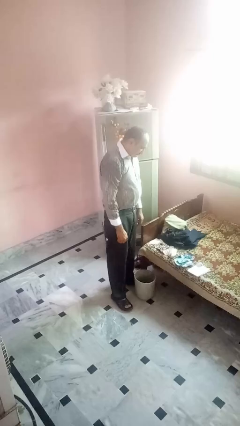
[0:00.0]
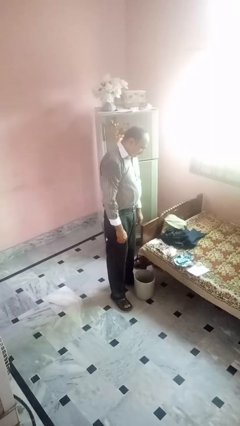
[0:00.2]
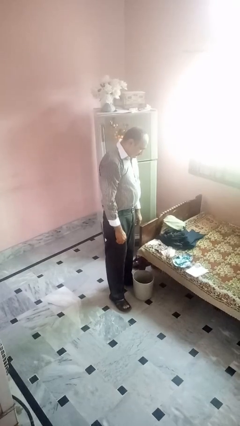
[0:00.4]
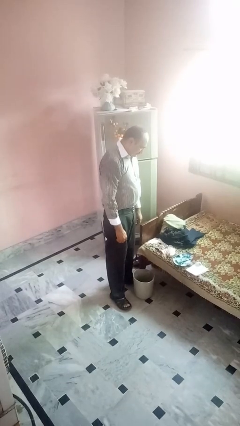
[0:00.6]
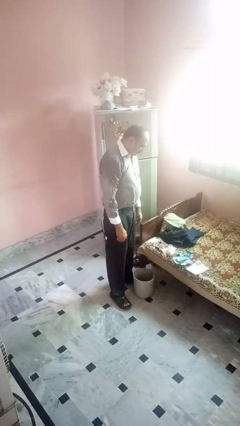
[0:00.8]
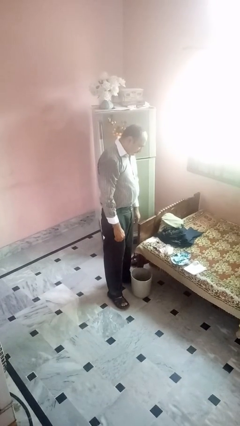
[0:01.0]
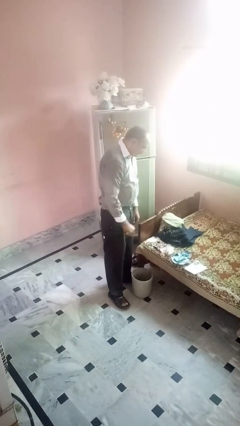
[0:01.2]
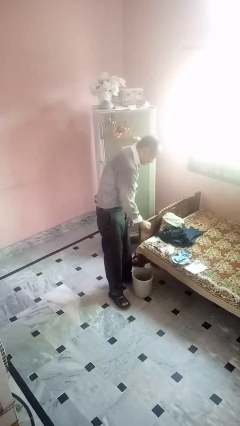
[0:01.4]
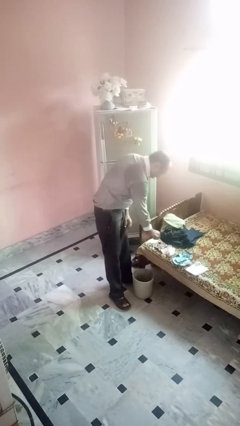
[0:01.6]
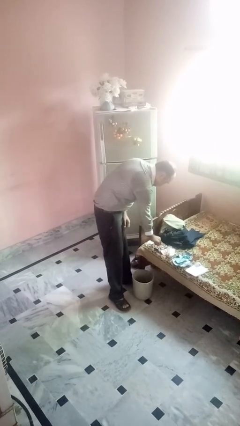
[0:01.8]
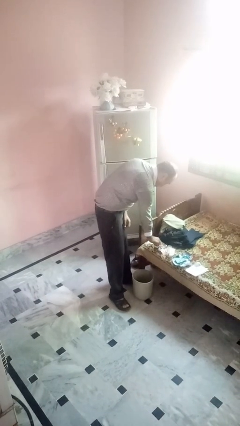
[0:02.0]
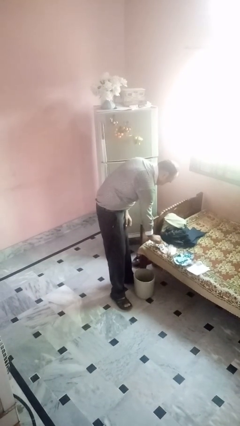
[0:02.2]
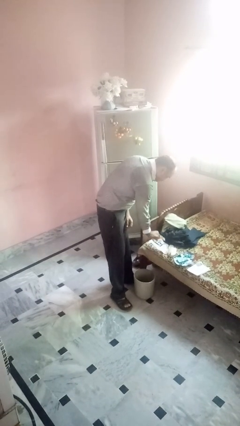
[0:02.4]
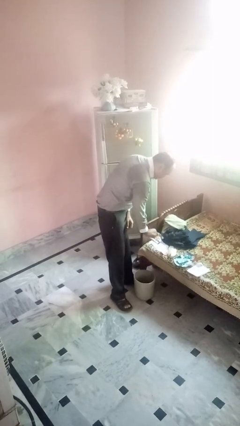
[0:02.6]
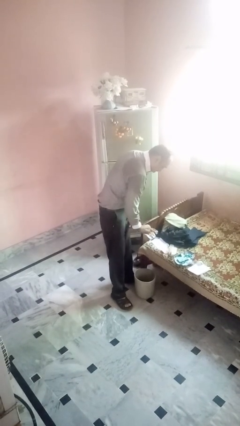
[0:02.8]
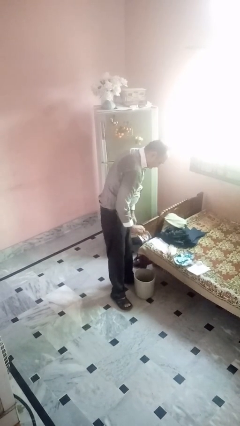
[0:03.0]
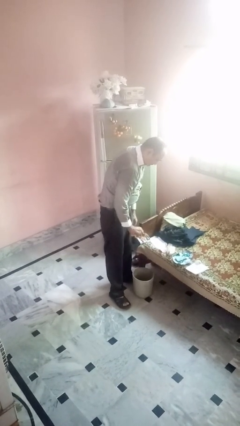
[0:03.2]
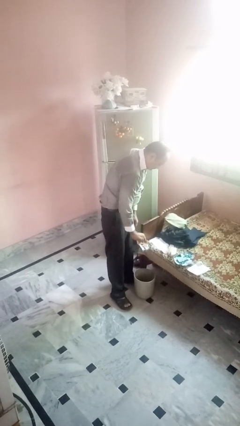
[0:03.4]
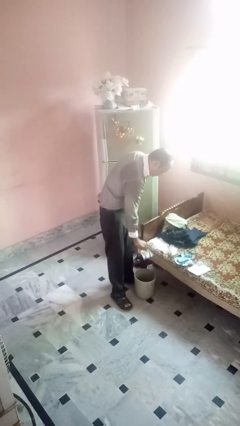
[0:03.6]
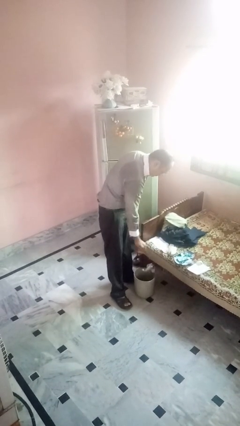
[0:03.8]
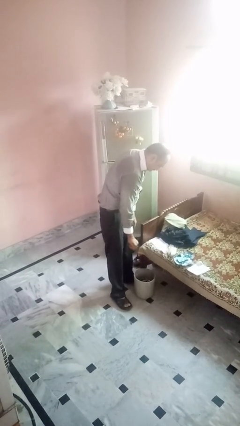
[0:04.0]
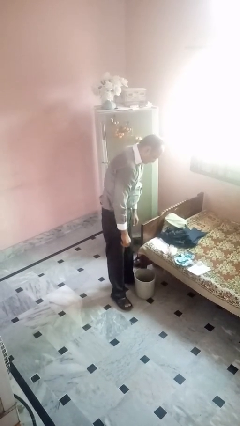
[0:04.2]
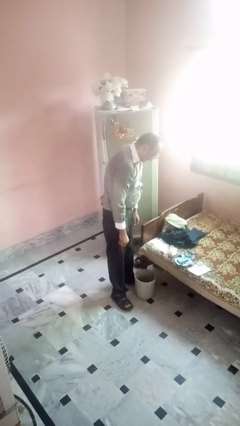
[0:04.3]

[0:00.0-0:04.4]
person discards trash

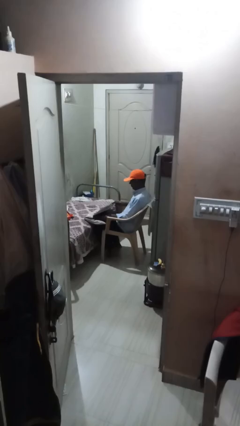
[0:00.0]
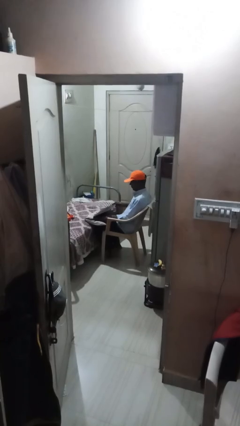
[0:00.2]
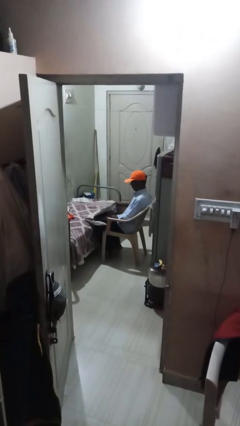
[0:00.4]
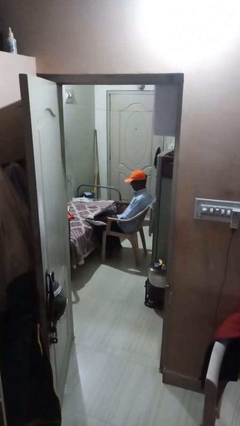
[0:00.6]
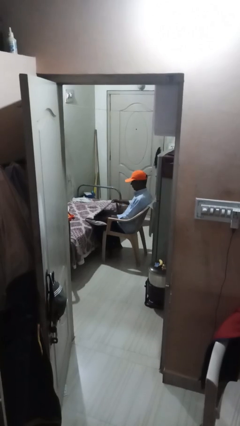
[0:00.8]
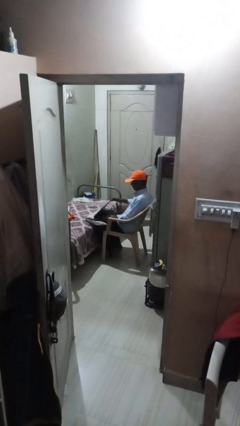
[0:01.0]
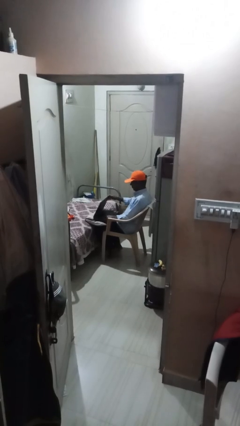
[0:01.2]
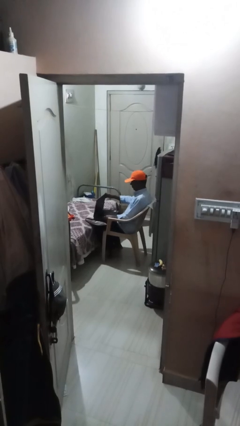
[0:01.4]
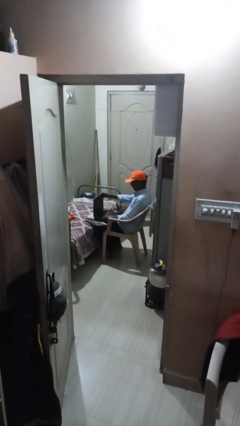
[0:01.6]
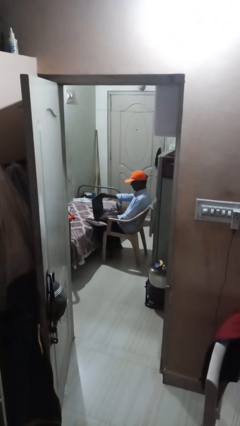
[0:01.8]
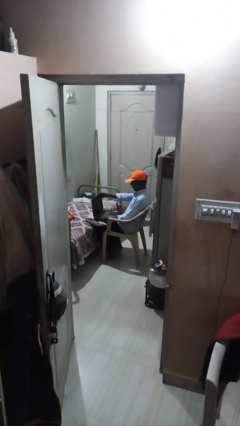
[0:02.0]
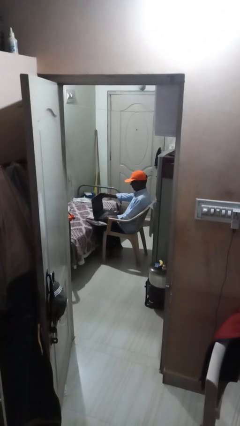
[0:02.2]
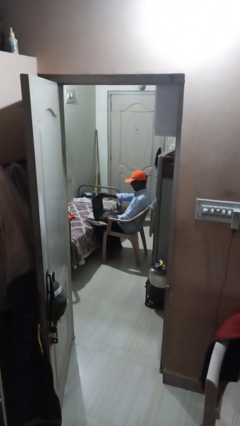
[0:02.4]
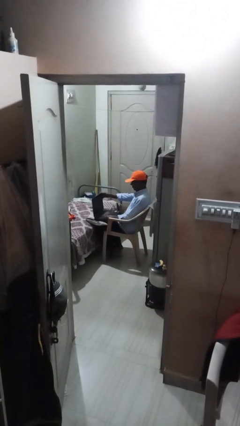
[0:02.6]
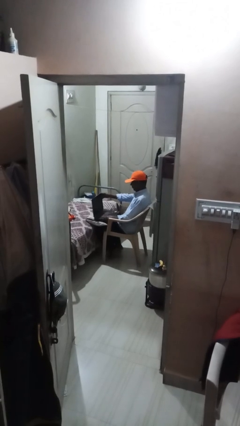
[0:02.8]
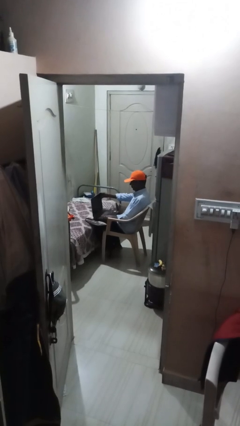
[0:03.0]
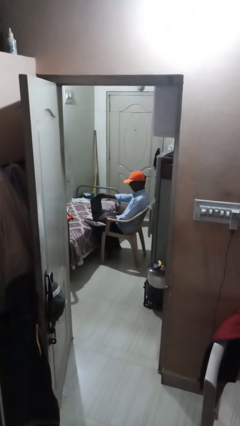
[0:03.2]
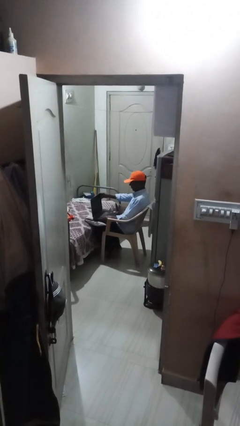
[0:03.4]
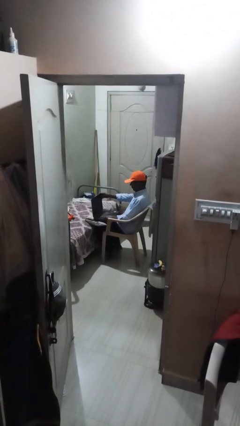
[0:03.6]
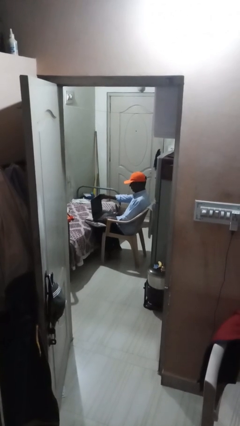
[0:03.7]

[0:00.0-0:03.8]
person interacts with laptop

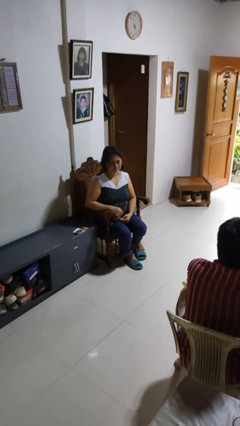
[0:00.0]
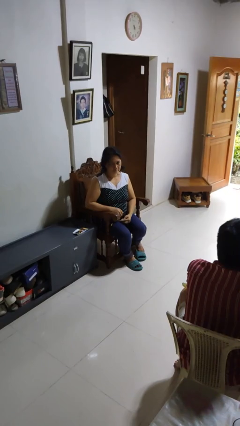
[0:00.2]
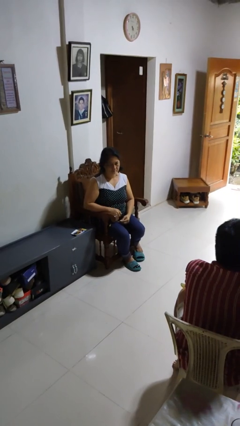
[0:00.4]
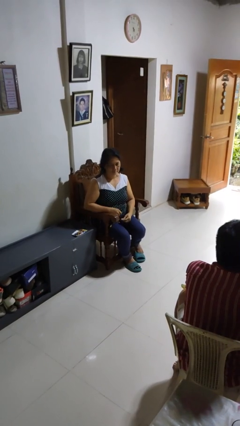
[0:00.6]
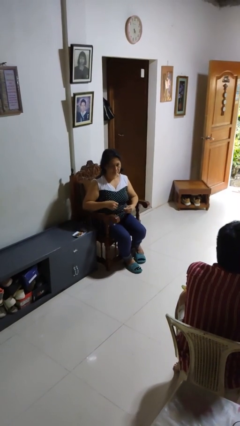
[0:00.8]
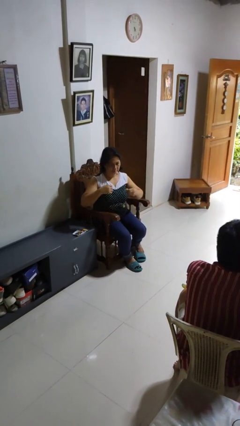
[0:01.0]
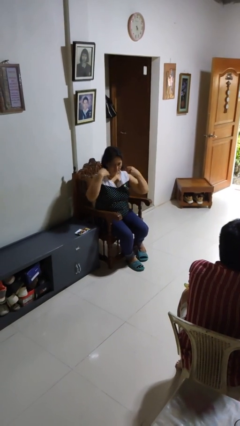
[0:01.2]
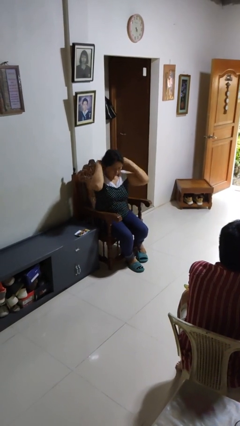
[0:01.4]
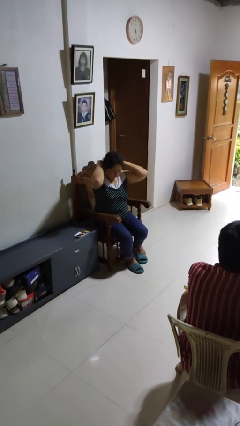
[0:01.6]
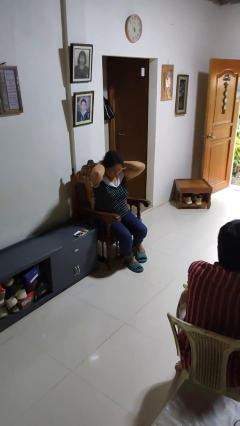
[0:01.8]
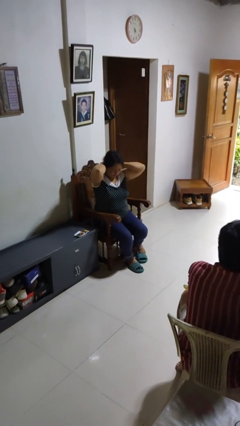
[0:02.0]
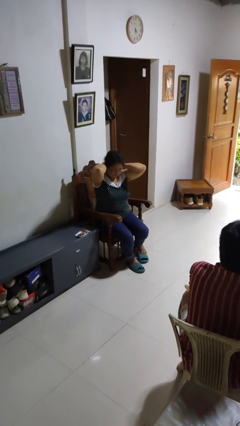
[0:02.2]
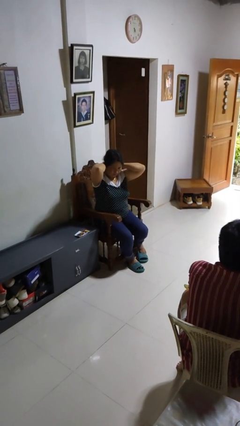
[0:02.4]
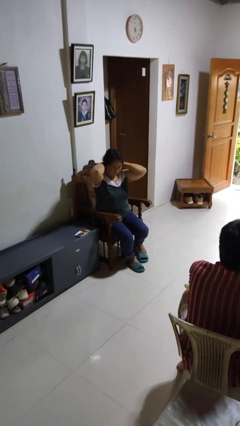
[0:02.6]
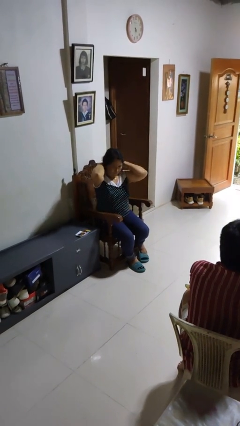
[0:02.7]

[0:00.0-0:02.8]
person puts on necklace

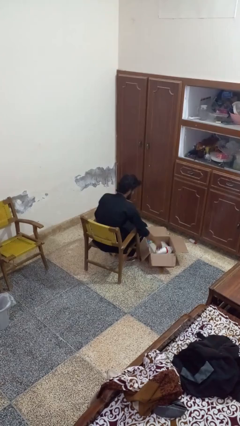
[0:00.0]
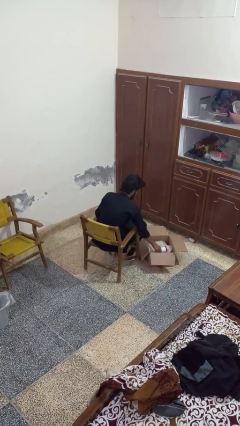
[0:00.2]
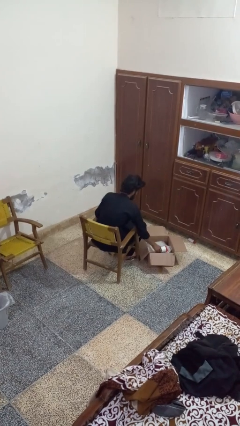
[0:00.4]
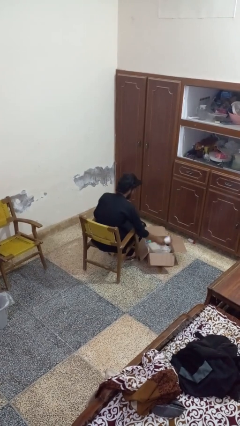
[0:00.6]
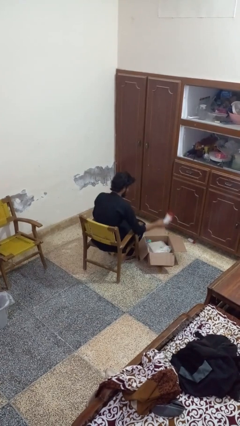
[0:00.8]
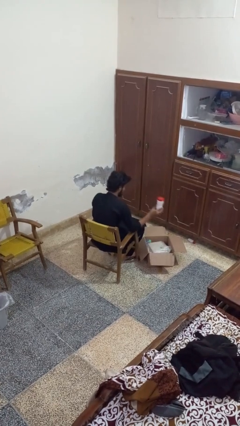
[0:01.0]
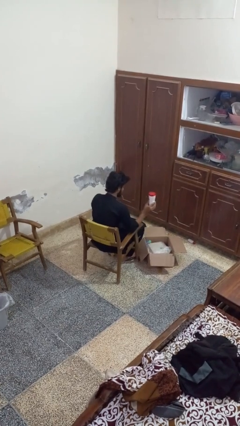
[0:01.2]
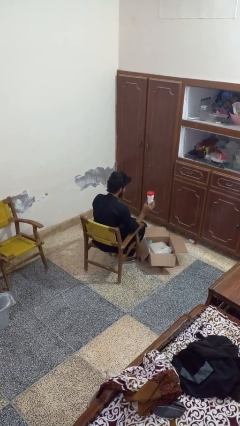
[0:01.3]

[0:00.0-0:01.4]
person takes object from box

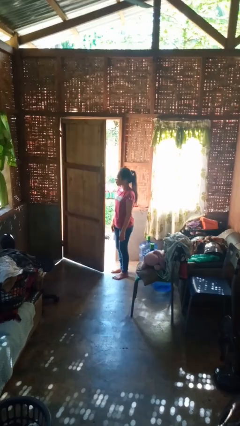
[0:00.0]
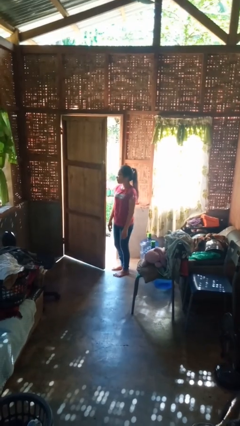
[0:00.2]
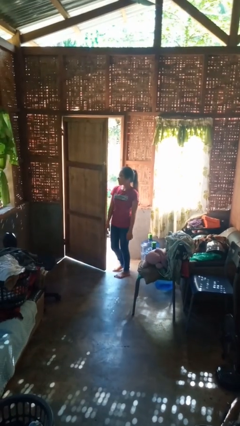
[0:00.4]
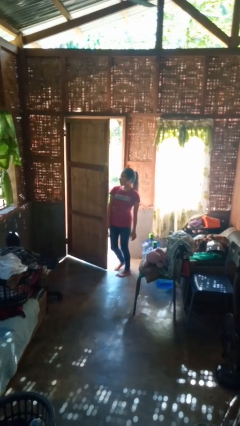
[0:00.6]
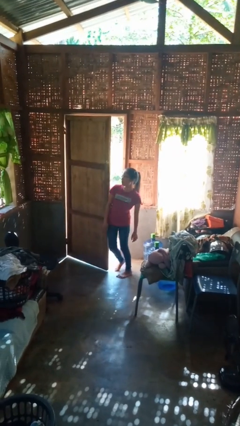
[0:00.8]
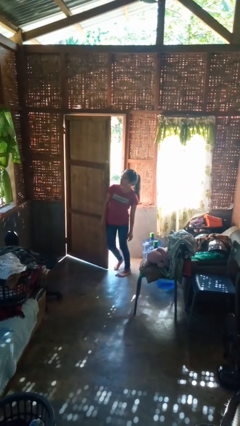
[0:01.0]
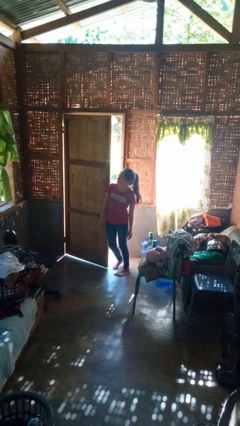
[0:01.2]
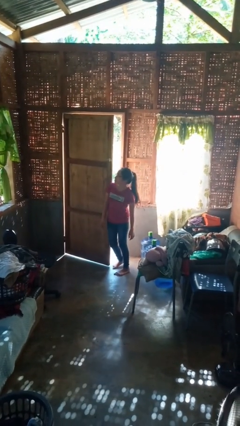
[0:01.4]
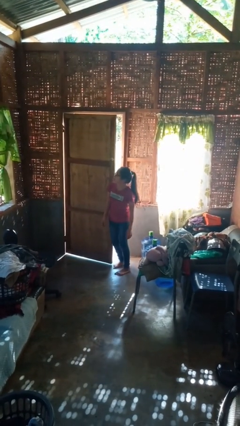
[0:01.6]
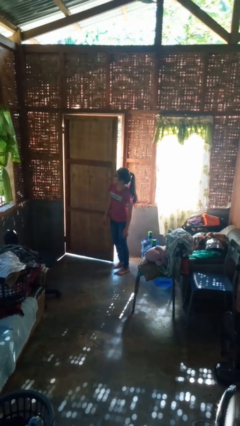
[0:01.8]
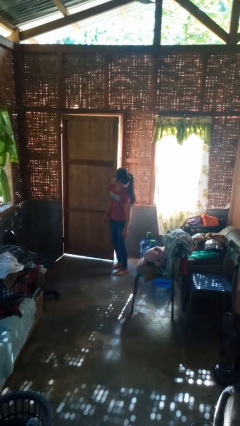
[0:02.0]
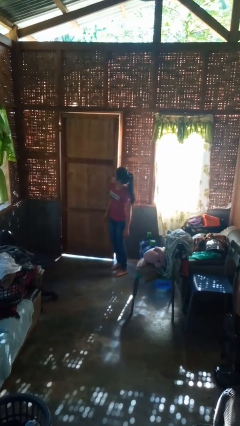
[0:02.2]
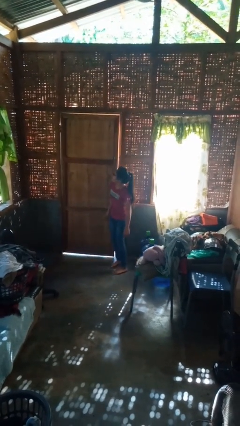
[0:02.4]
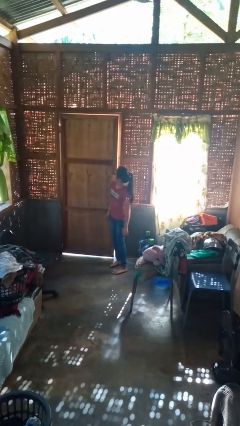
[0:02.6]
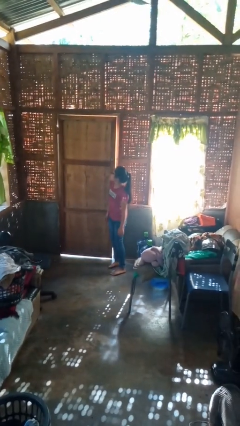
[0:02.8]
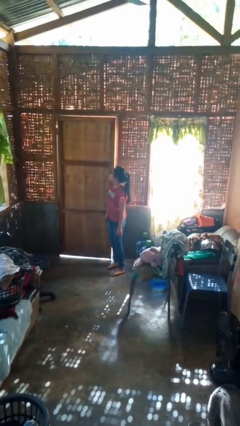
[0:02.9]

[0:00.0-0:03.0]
person closes door with hip

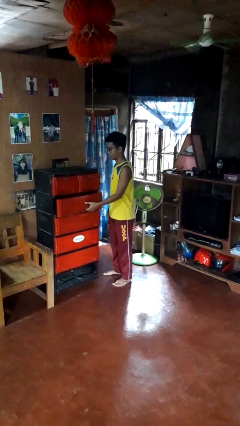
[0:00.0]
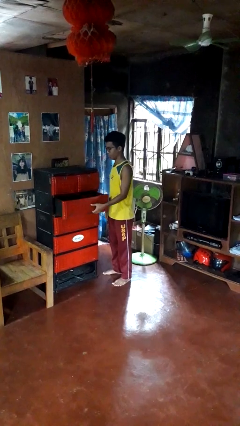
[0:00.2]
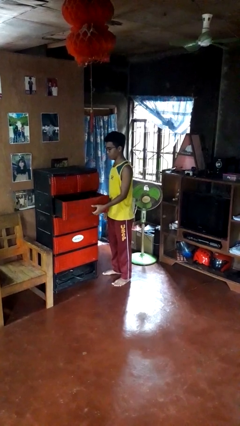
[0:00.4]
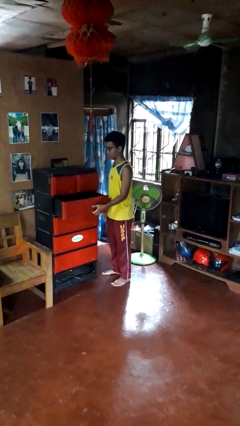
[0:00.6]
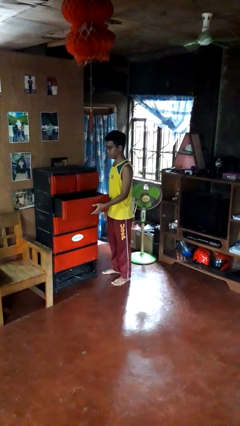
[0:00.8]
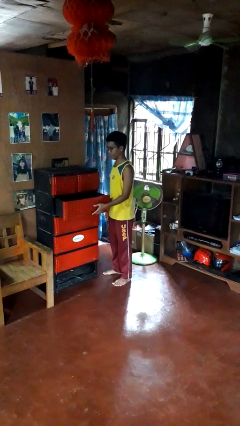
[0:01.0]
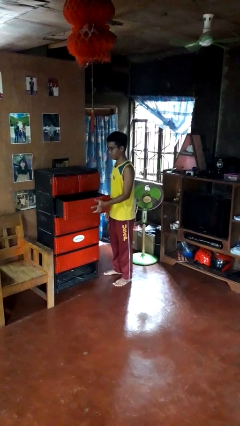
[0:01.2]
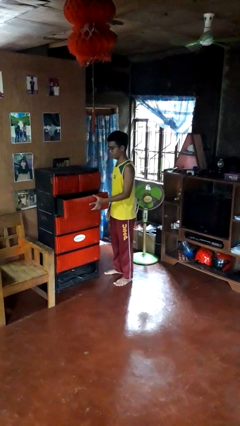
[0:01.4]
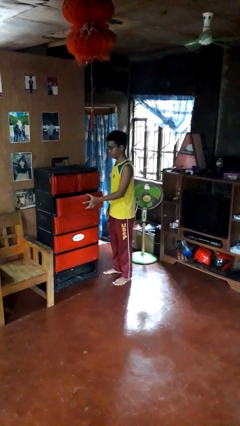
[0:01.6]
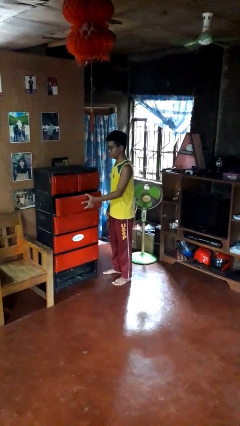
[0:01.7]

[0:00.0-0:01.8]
person opens dresser drawer
